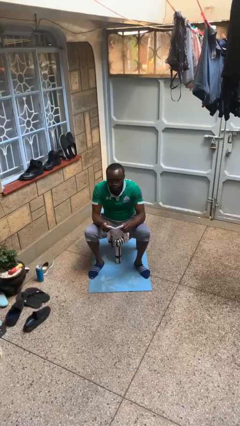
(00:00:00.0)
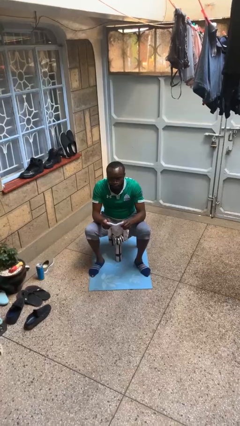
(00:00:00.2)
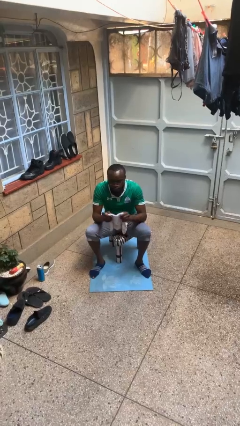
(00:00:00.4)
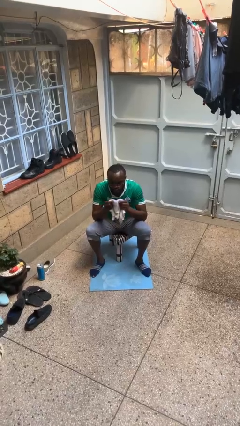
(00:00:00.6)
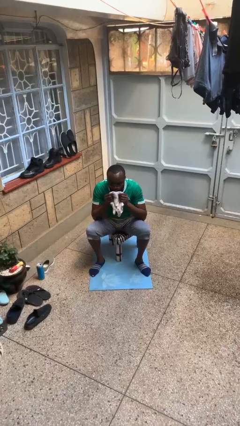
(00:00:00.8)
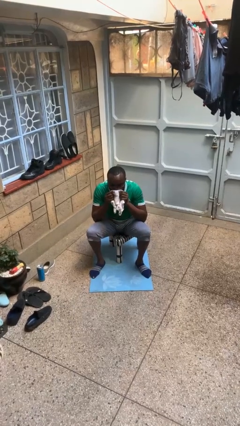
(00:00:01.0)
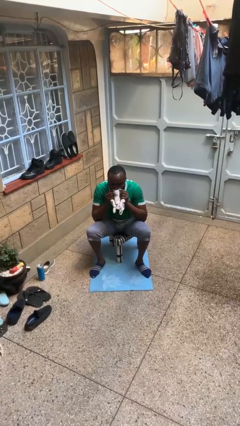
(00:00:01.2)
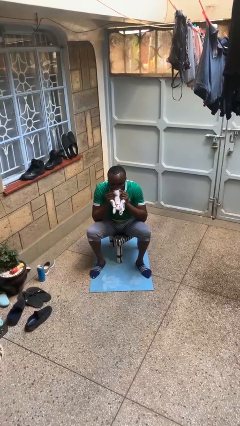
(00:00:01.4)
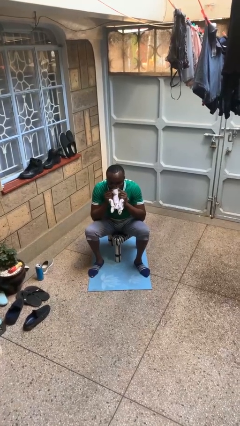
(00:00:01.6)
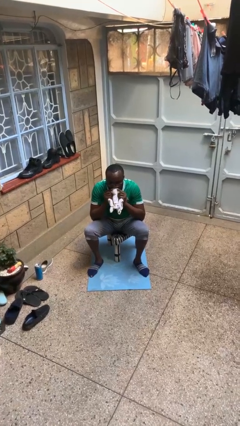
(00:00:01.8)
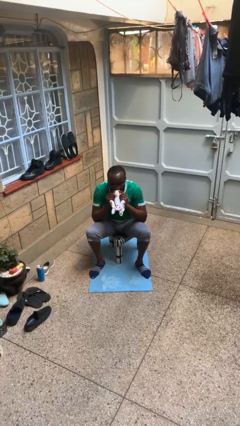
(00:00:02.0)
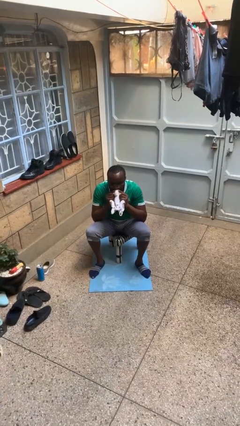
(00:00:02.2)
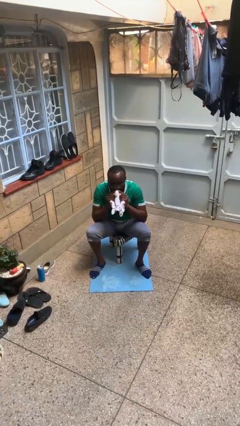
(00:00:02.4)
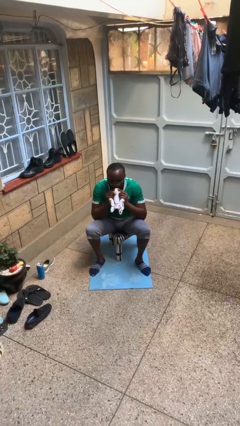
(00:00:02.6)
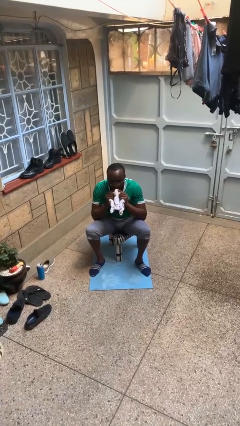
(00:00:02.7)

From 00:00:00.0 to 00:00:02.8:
person wipes mouth with napkin

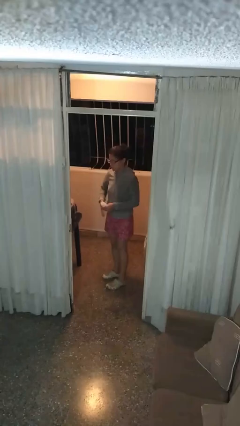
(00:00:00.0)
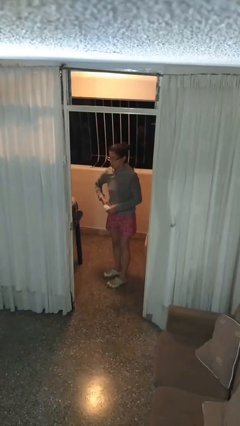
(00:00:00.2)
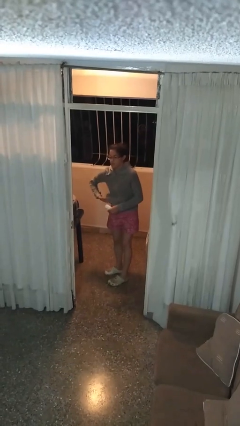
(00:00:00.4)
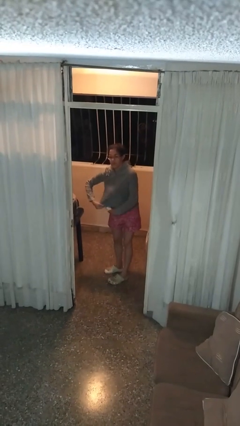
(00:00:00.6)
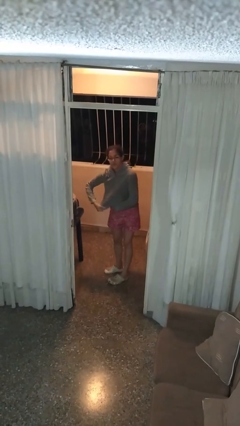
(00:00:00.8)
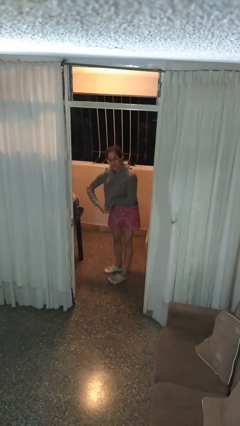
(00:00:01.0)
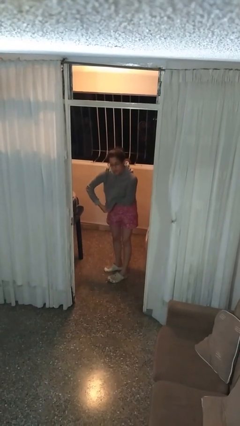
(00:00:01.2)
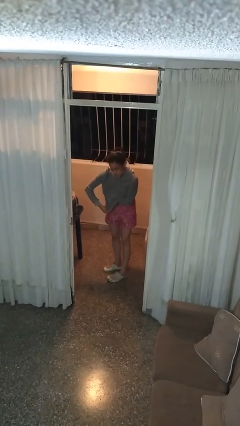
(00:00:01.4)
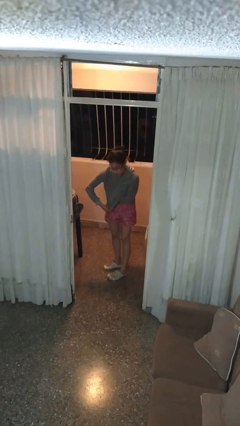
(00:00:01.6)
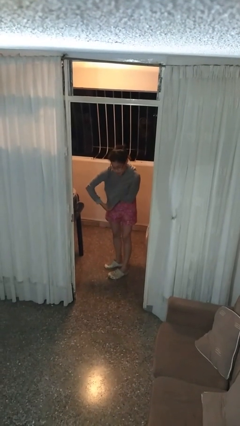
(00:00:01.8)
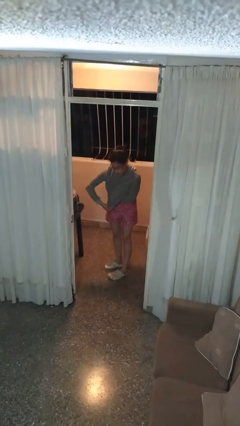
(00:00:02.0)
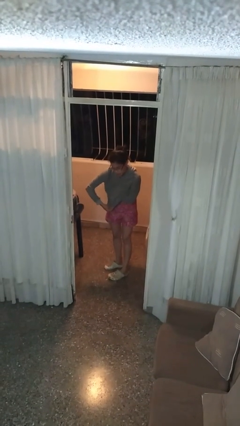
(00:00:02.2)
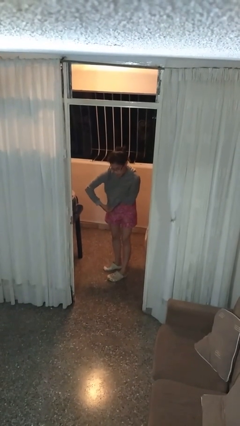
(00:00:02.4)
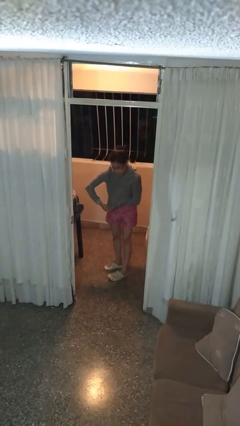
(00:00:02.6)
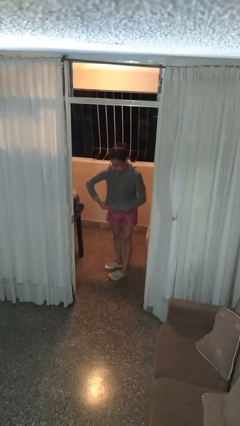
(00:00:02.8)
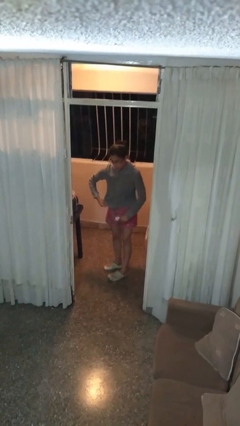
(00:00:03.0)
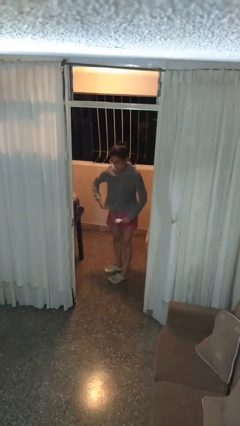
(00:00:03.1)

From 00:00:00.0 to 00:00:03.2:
person applies deodorant

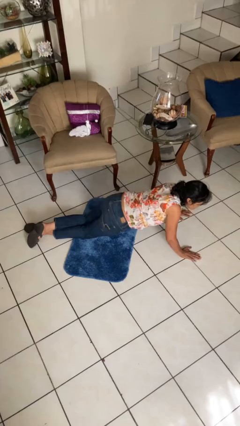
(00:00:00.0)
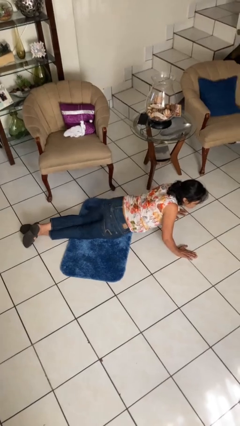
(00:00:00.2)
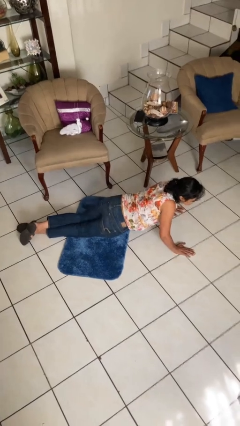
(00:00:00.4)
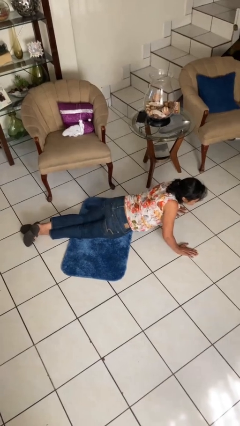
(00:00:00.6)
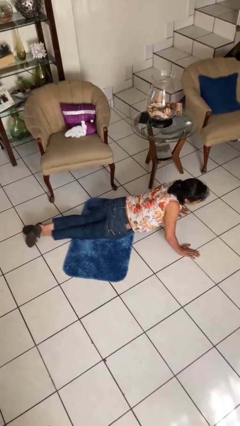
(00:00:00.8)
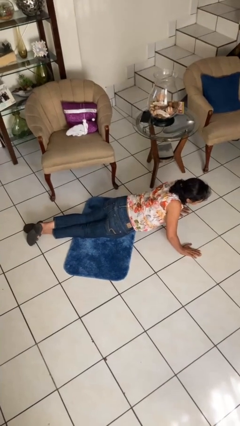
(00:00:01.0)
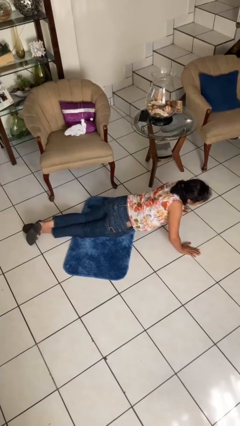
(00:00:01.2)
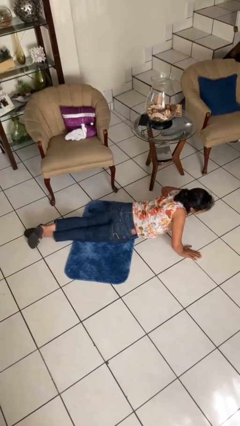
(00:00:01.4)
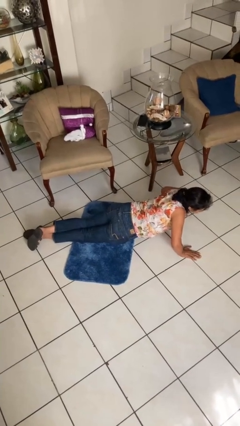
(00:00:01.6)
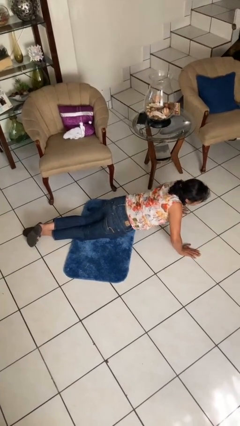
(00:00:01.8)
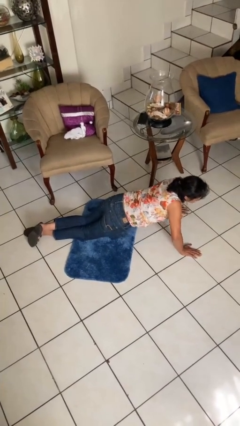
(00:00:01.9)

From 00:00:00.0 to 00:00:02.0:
person exercises with pushup

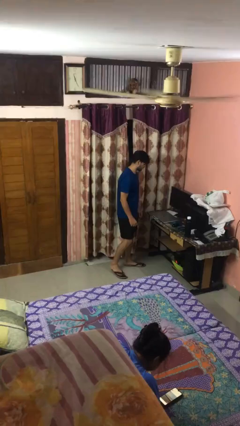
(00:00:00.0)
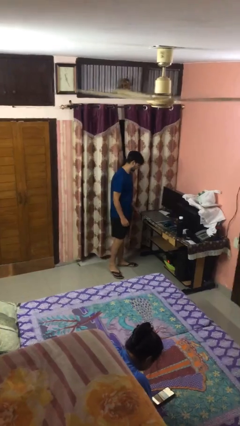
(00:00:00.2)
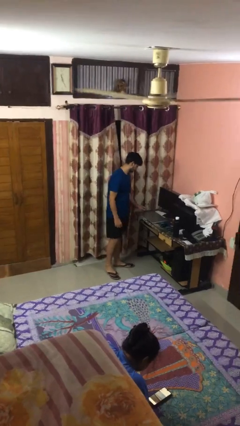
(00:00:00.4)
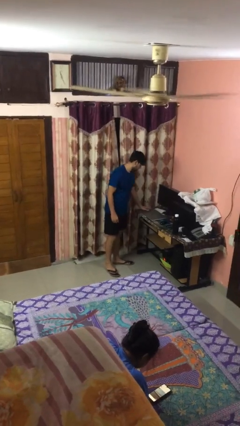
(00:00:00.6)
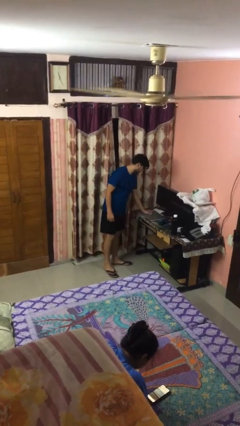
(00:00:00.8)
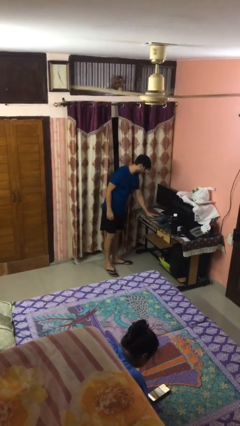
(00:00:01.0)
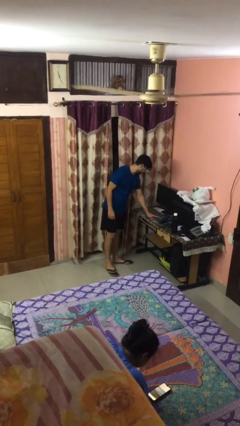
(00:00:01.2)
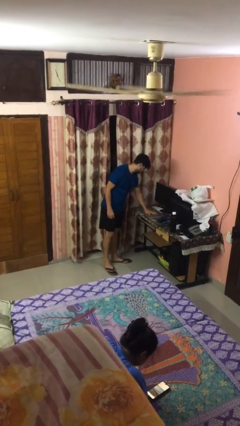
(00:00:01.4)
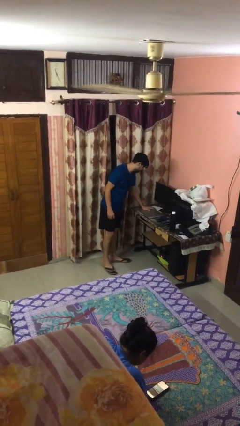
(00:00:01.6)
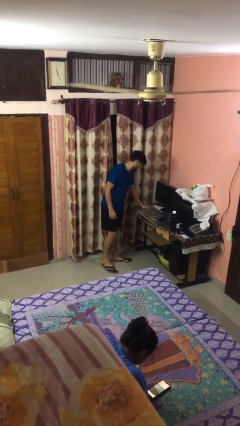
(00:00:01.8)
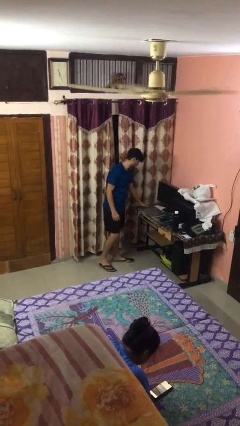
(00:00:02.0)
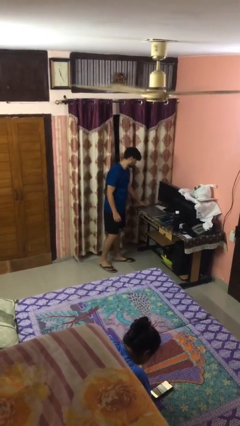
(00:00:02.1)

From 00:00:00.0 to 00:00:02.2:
person waves hand over object

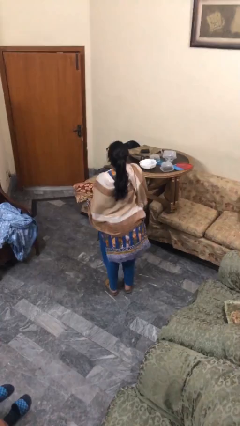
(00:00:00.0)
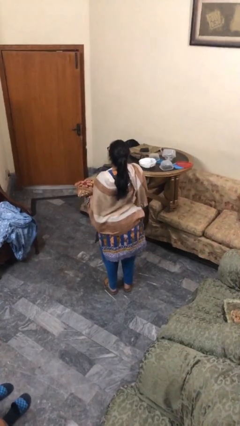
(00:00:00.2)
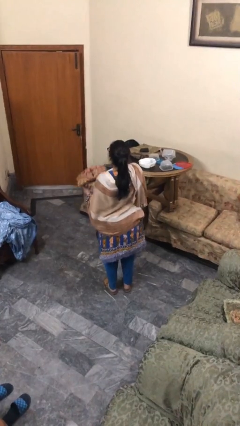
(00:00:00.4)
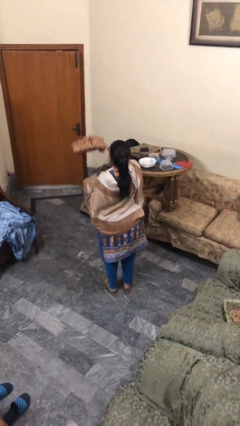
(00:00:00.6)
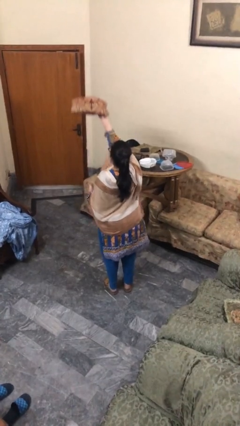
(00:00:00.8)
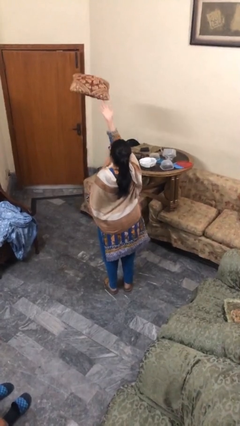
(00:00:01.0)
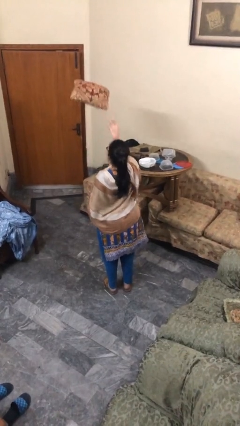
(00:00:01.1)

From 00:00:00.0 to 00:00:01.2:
person drops object

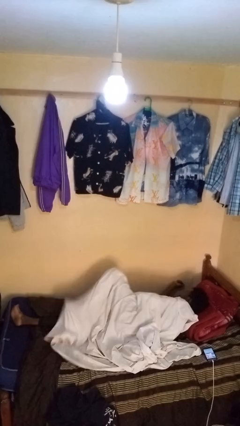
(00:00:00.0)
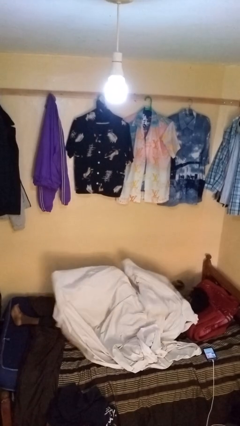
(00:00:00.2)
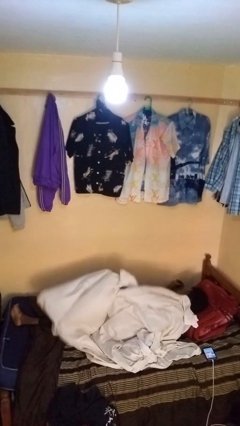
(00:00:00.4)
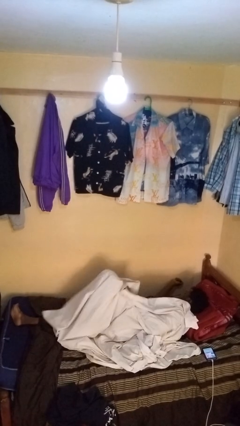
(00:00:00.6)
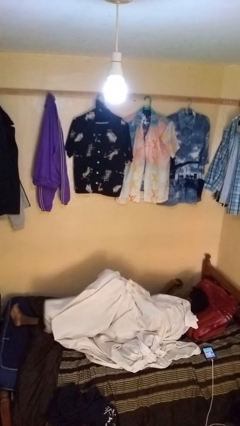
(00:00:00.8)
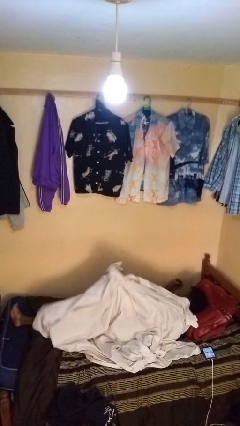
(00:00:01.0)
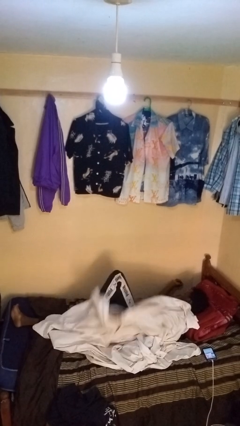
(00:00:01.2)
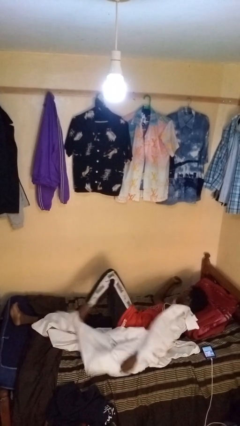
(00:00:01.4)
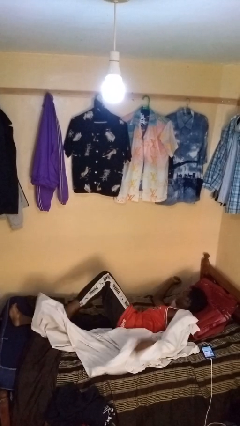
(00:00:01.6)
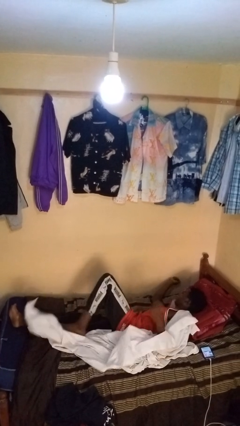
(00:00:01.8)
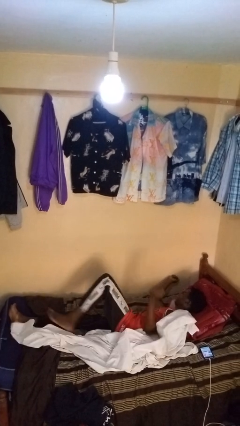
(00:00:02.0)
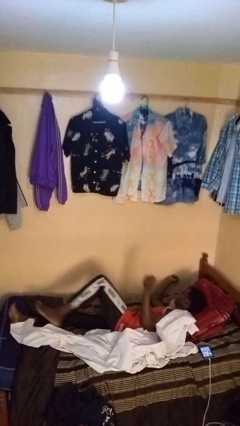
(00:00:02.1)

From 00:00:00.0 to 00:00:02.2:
person uncovers with bedsheets

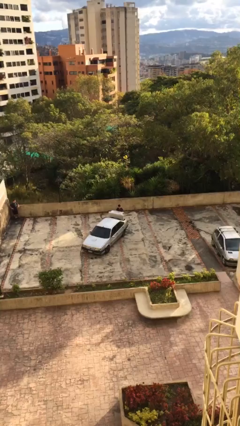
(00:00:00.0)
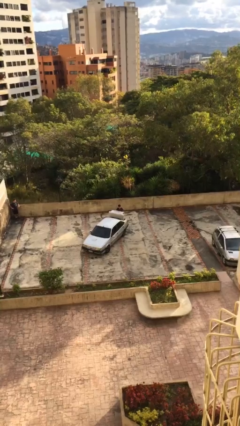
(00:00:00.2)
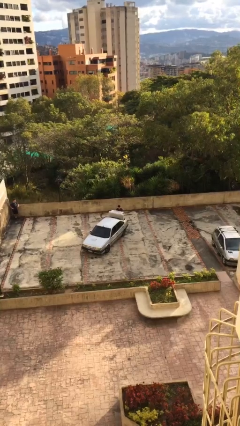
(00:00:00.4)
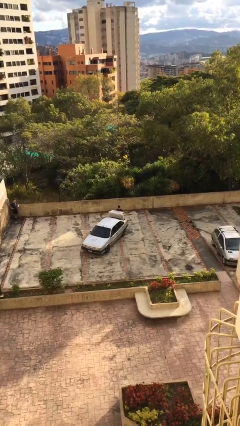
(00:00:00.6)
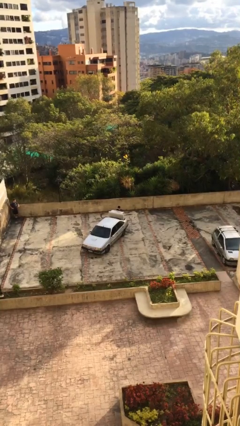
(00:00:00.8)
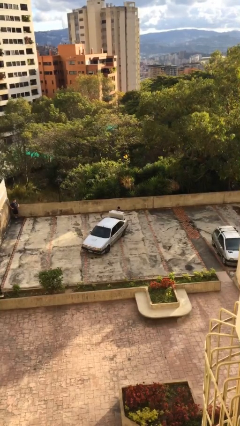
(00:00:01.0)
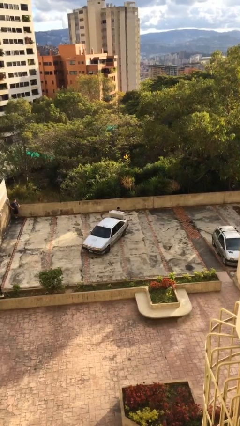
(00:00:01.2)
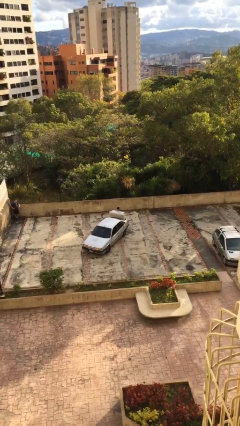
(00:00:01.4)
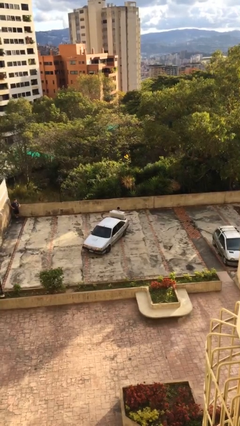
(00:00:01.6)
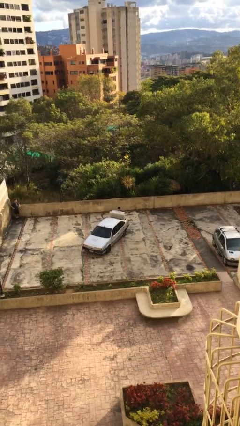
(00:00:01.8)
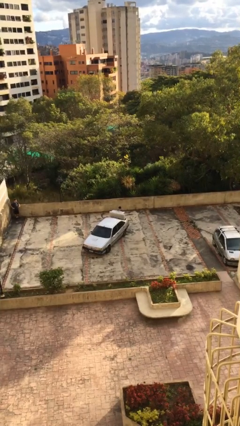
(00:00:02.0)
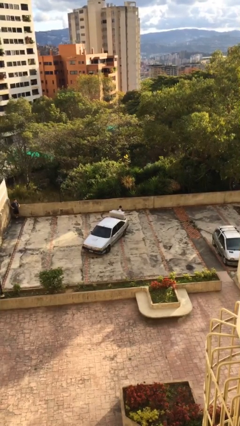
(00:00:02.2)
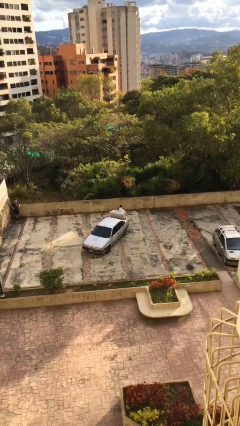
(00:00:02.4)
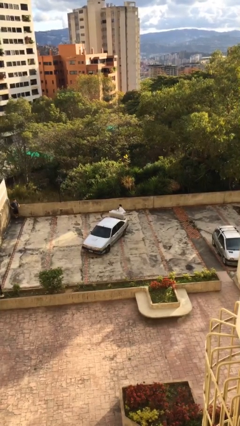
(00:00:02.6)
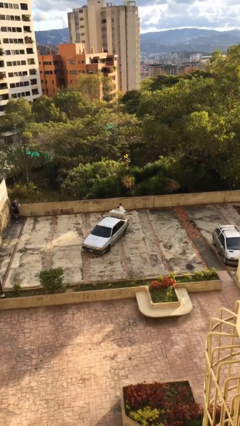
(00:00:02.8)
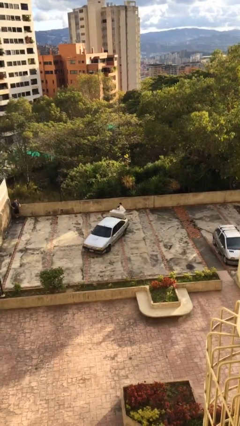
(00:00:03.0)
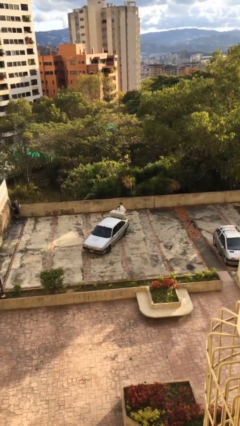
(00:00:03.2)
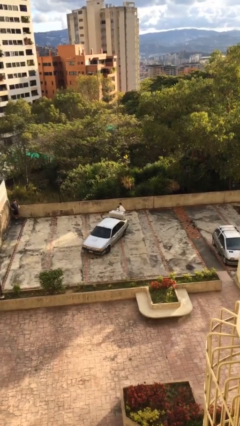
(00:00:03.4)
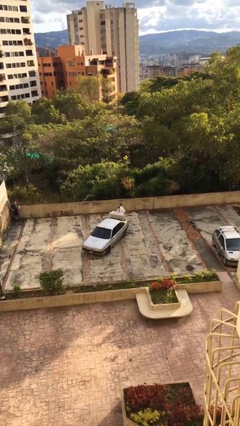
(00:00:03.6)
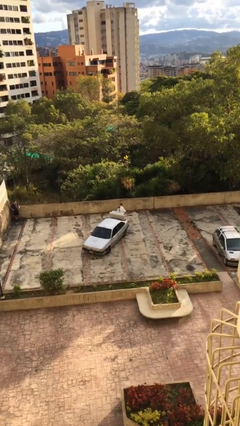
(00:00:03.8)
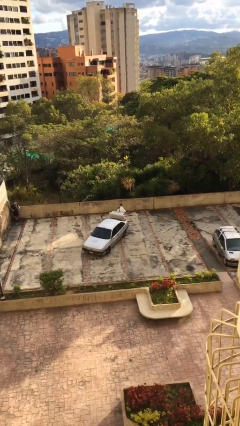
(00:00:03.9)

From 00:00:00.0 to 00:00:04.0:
person unloads car
